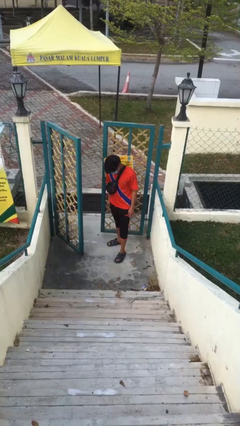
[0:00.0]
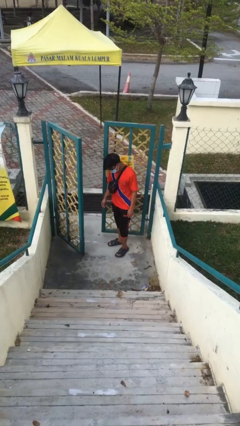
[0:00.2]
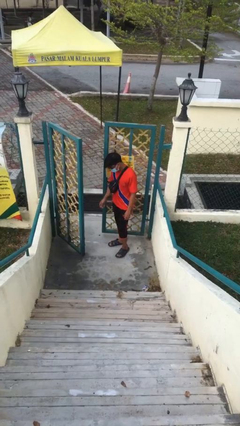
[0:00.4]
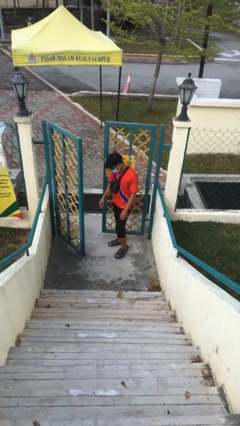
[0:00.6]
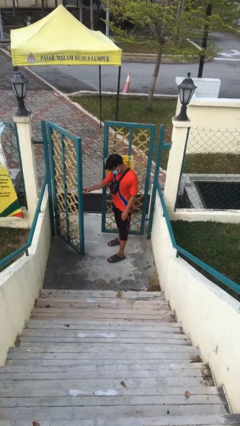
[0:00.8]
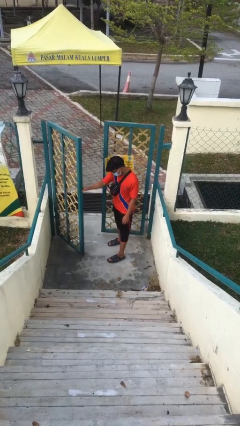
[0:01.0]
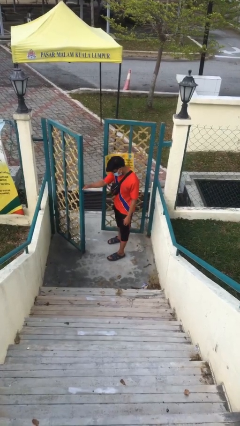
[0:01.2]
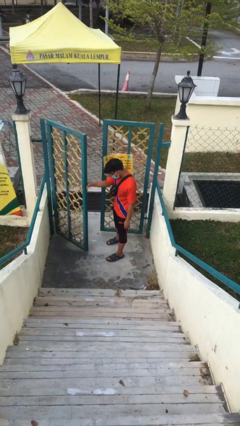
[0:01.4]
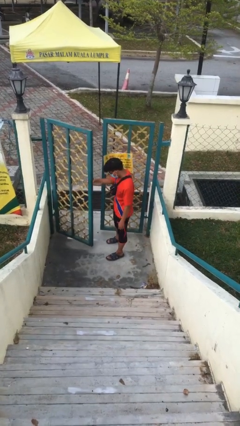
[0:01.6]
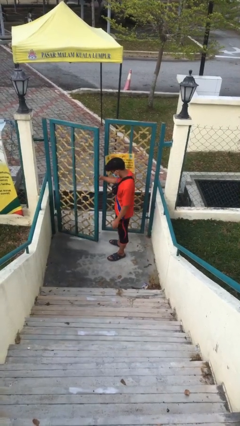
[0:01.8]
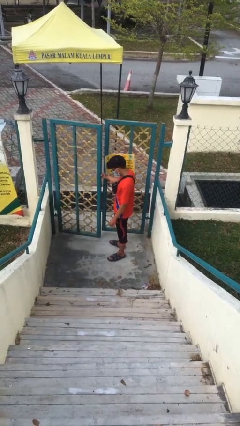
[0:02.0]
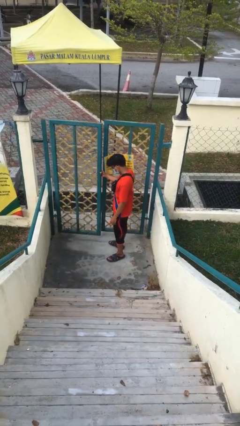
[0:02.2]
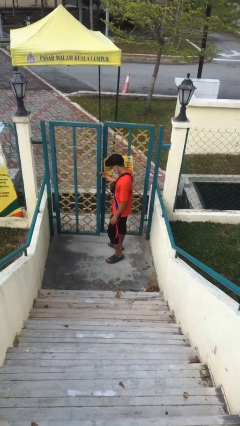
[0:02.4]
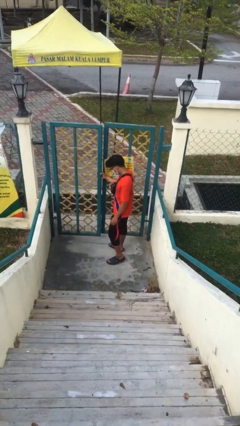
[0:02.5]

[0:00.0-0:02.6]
person closes facility door

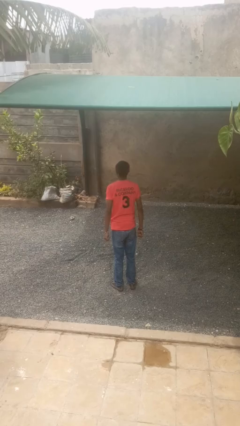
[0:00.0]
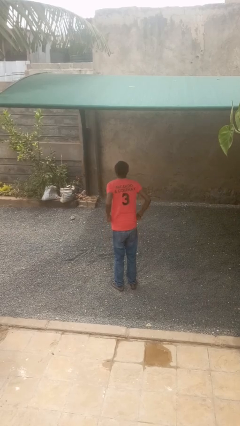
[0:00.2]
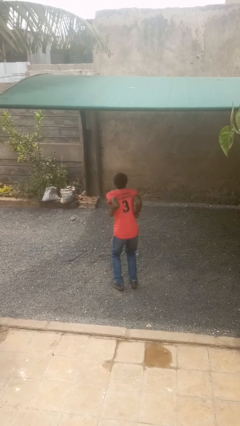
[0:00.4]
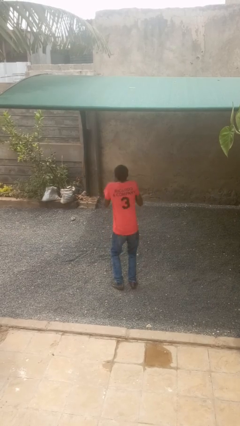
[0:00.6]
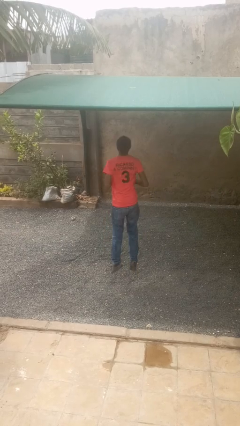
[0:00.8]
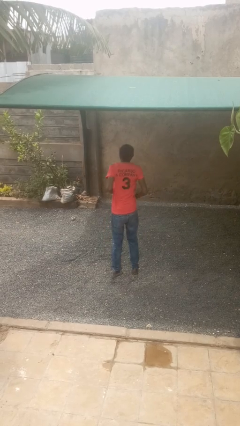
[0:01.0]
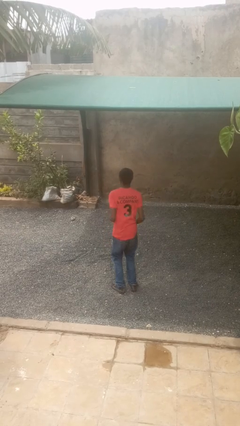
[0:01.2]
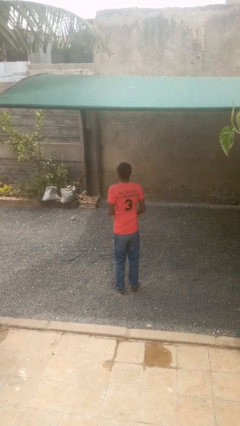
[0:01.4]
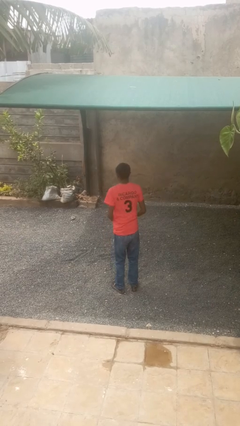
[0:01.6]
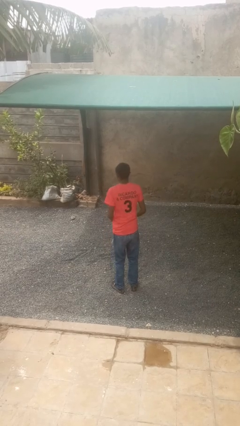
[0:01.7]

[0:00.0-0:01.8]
person jumps

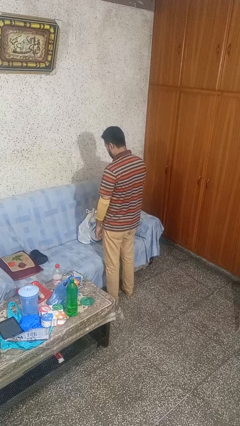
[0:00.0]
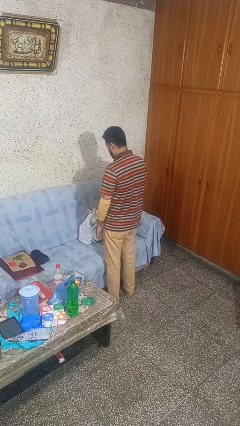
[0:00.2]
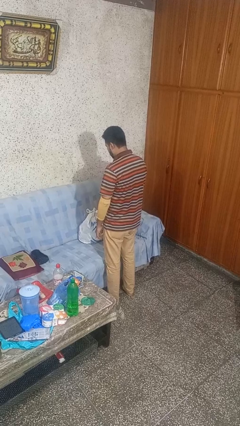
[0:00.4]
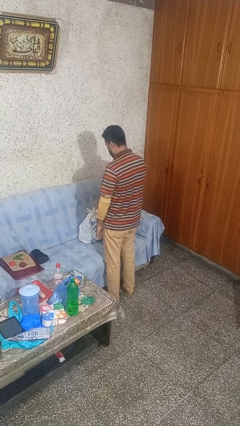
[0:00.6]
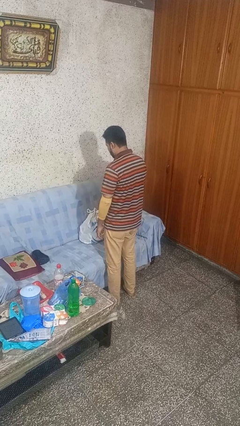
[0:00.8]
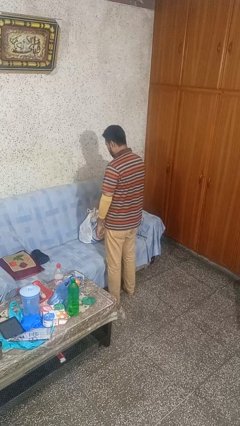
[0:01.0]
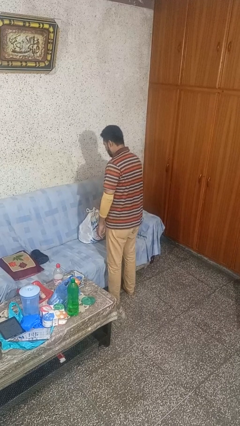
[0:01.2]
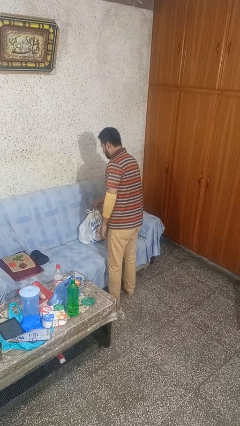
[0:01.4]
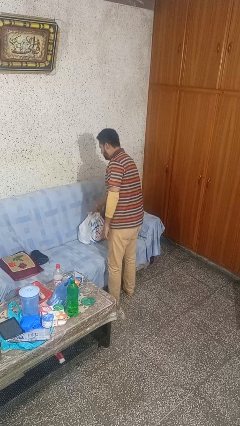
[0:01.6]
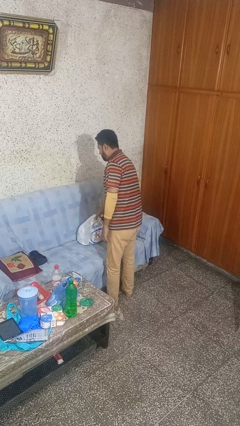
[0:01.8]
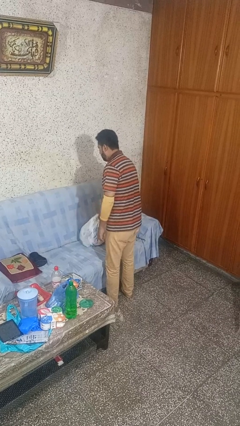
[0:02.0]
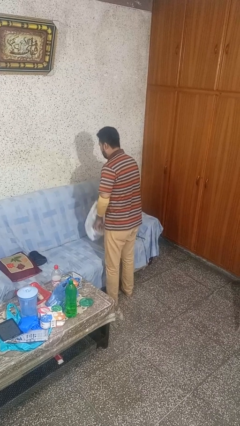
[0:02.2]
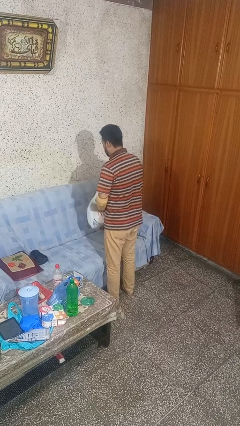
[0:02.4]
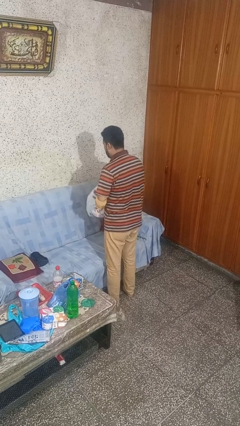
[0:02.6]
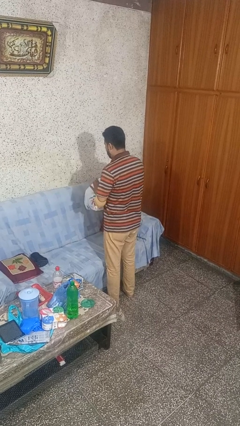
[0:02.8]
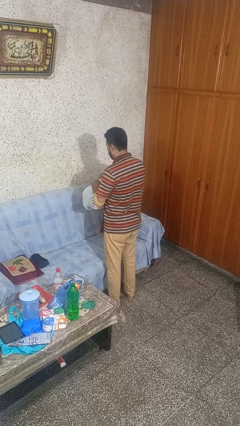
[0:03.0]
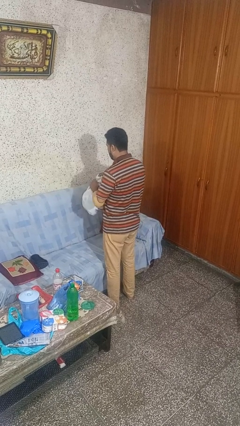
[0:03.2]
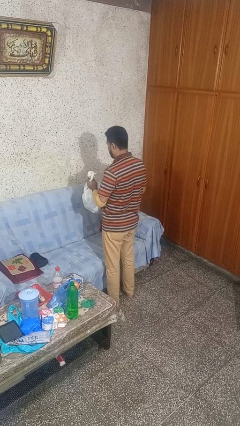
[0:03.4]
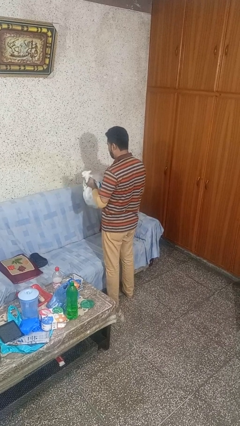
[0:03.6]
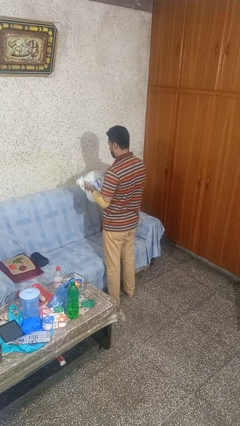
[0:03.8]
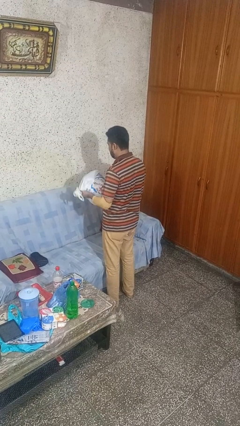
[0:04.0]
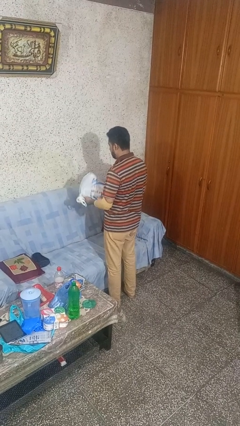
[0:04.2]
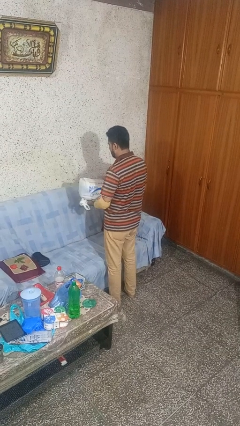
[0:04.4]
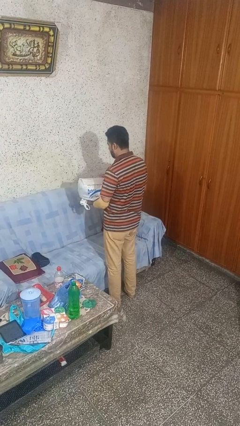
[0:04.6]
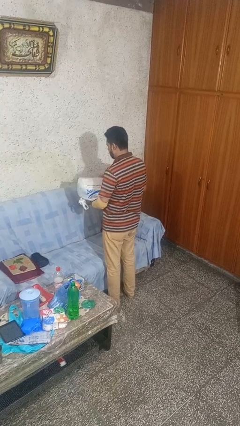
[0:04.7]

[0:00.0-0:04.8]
person picks up object from couch

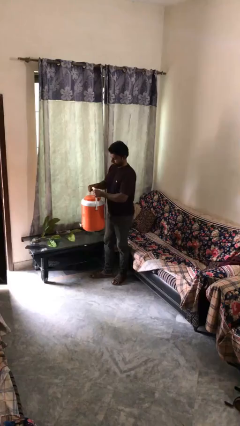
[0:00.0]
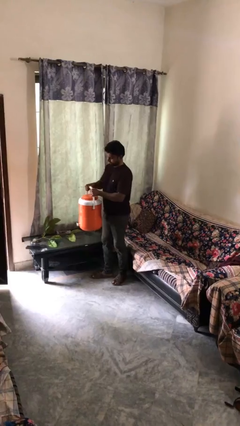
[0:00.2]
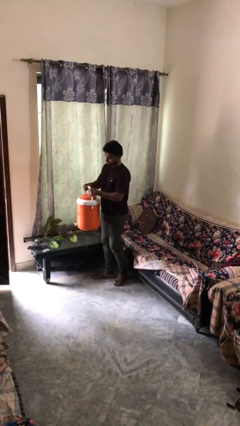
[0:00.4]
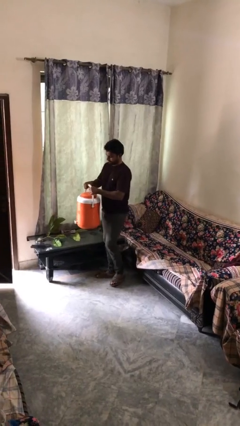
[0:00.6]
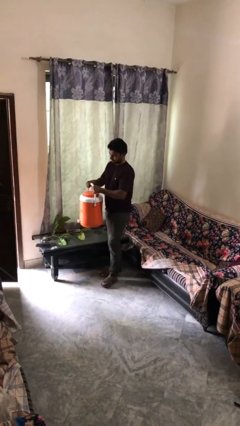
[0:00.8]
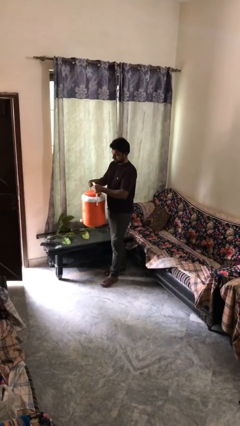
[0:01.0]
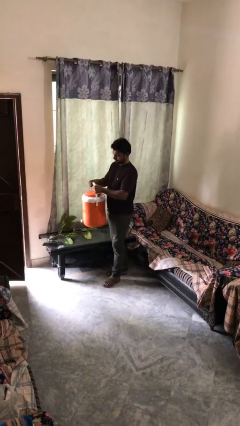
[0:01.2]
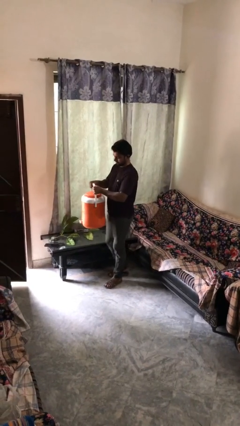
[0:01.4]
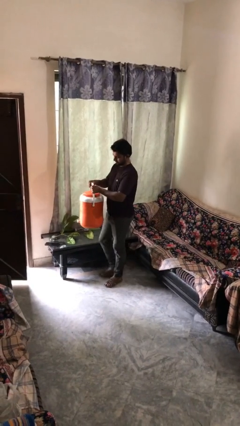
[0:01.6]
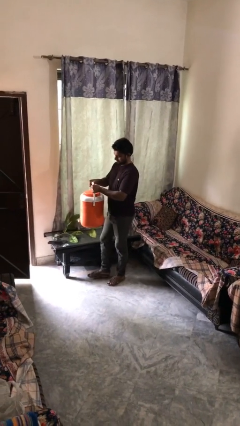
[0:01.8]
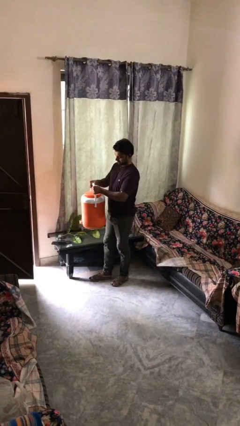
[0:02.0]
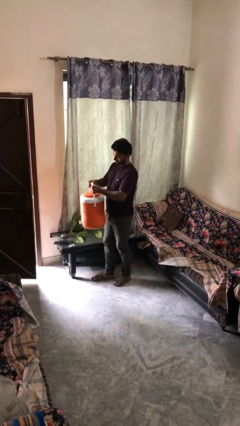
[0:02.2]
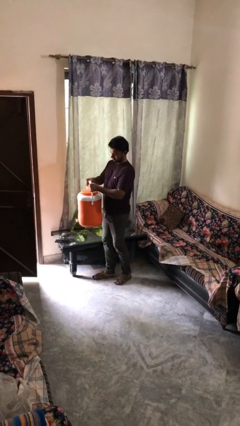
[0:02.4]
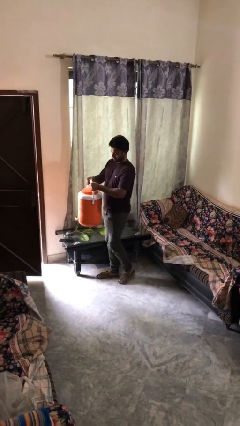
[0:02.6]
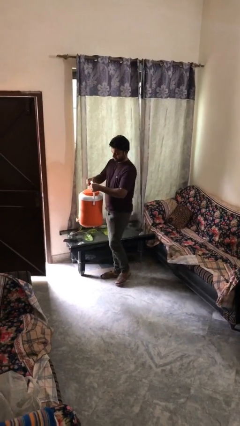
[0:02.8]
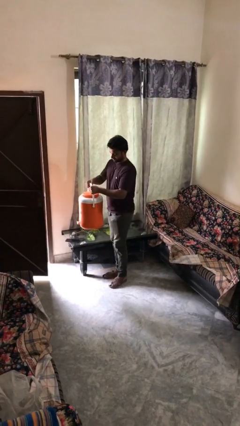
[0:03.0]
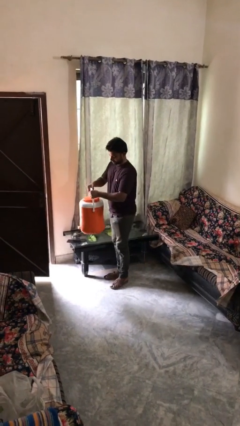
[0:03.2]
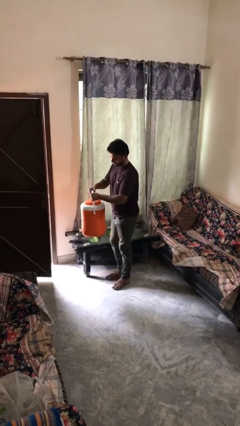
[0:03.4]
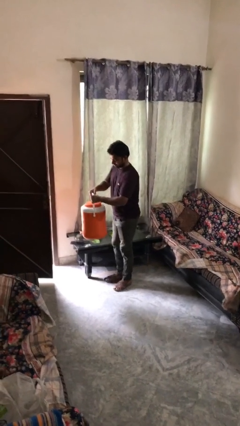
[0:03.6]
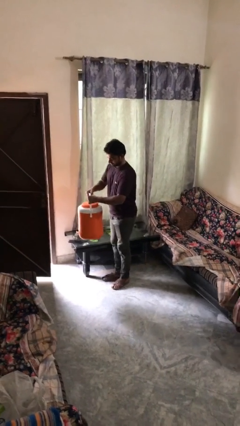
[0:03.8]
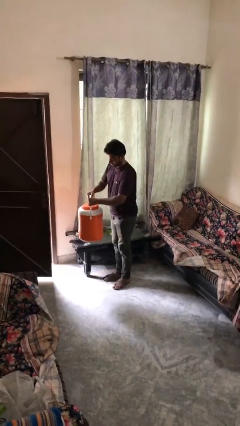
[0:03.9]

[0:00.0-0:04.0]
person carries heavy object

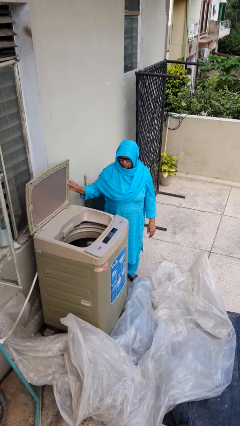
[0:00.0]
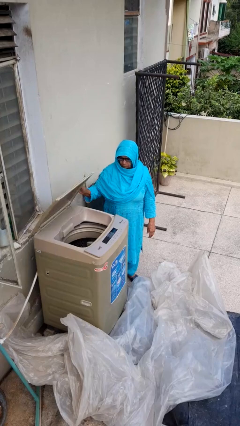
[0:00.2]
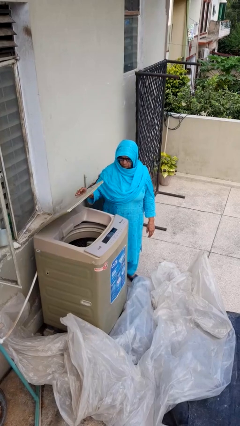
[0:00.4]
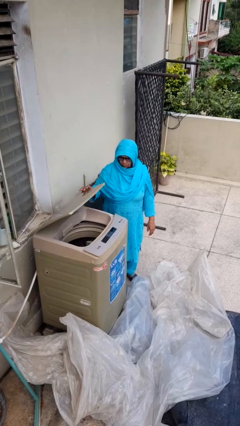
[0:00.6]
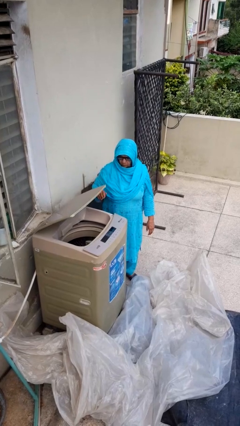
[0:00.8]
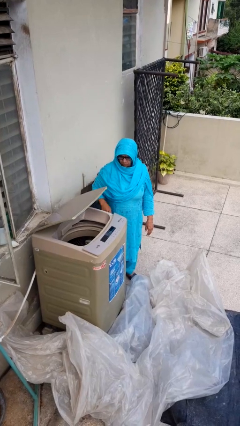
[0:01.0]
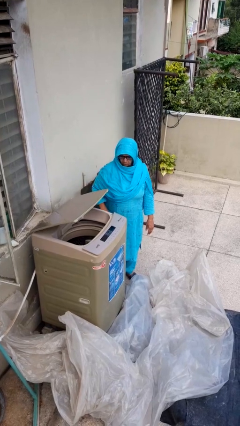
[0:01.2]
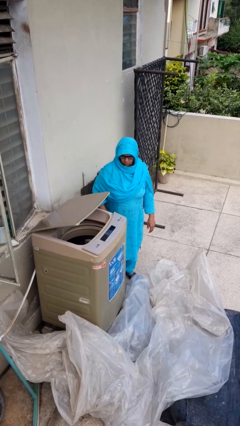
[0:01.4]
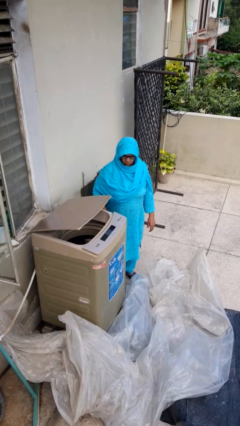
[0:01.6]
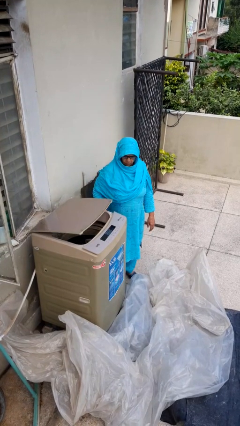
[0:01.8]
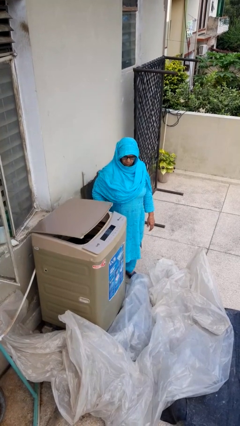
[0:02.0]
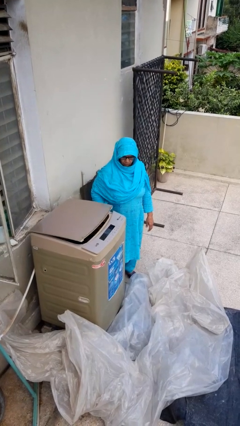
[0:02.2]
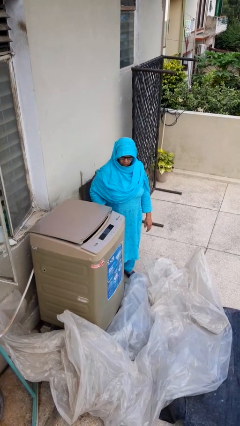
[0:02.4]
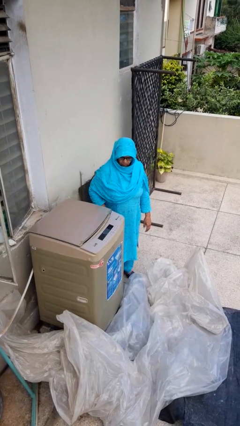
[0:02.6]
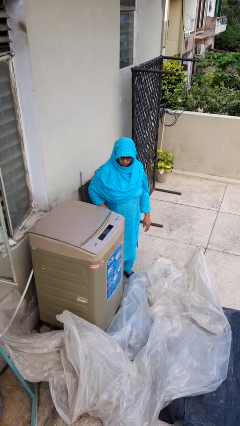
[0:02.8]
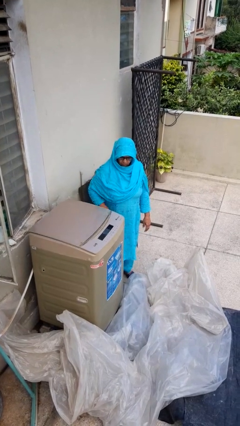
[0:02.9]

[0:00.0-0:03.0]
person closes clothes washer

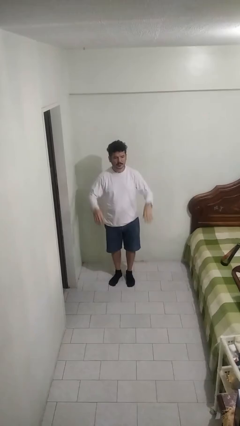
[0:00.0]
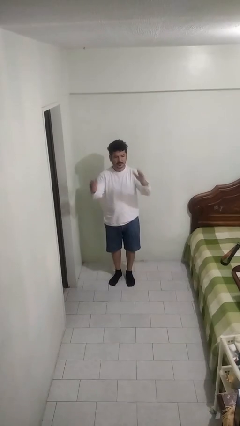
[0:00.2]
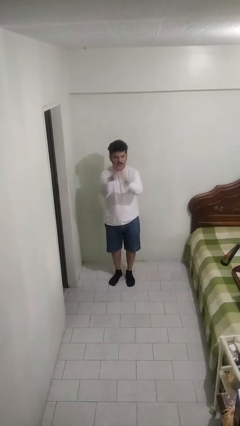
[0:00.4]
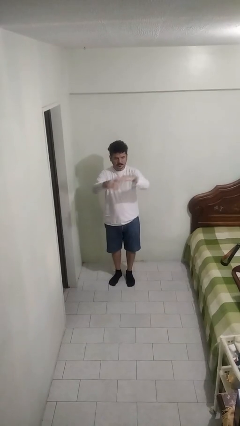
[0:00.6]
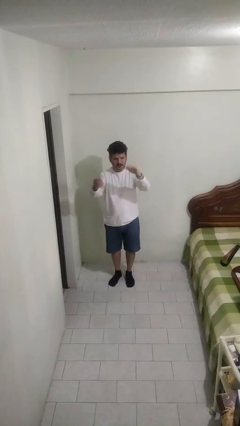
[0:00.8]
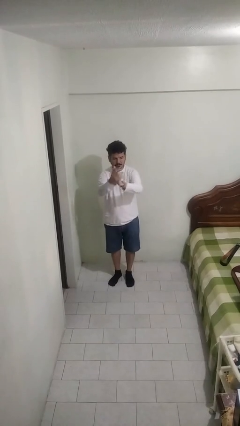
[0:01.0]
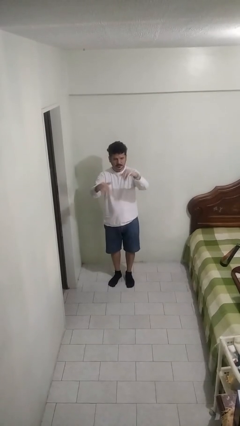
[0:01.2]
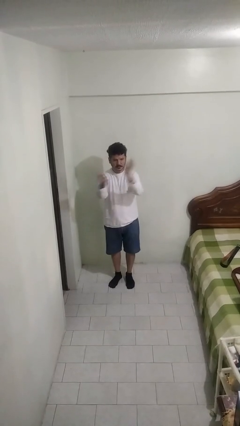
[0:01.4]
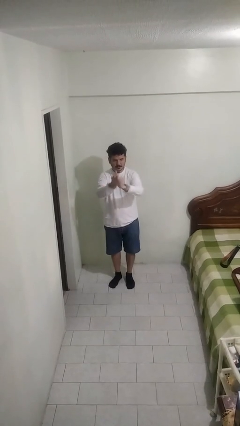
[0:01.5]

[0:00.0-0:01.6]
person claps hands
